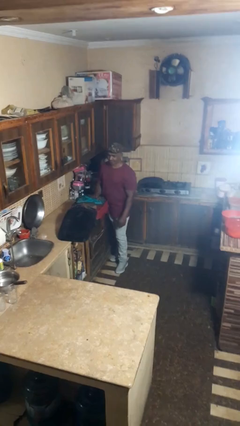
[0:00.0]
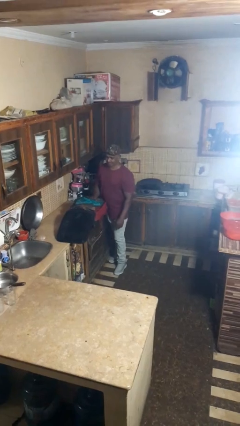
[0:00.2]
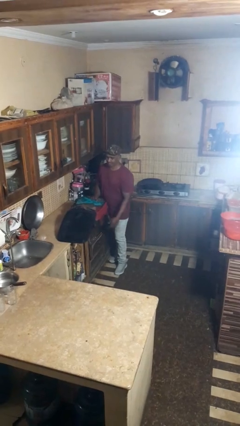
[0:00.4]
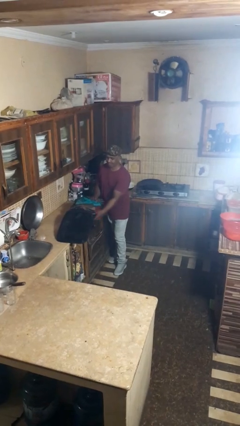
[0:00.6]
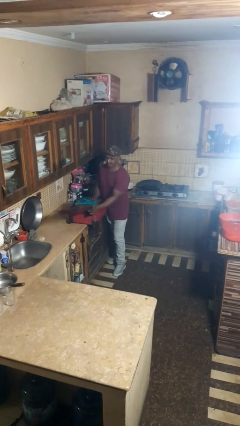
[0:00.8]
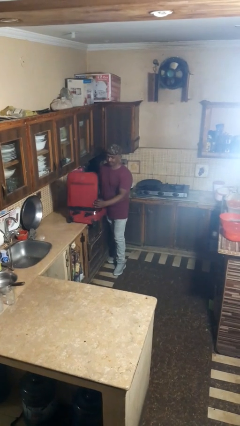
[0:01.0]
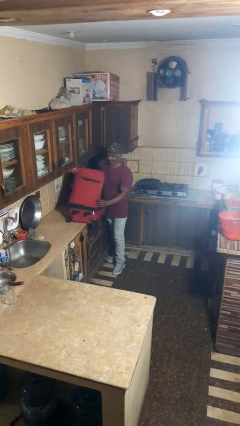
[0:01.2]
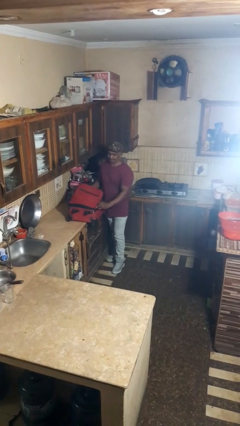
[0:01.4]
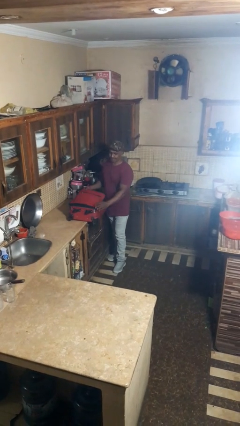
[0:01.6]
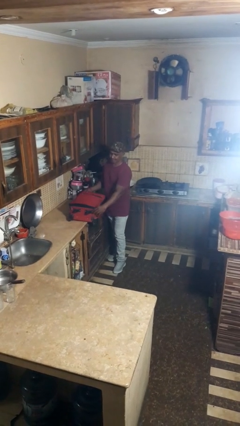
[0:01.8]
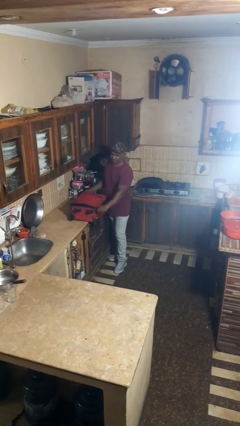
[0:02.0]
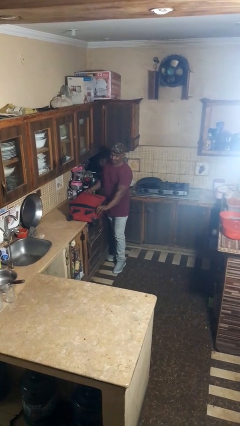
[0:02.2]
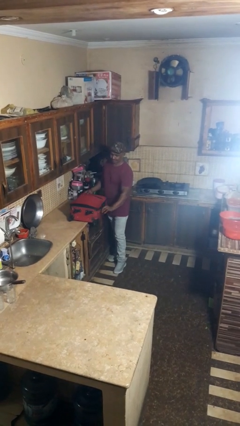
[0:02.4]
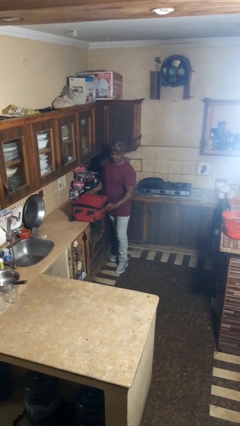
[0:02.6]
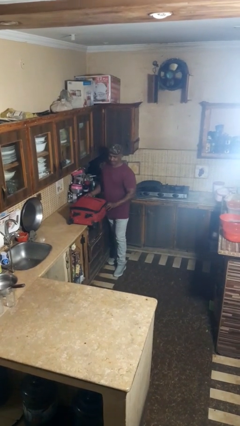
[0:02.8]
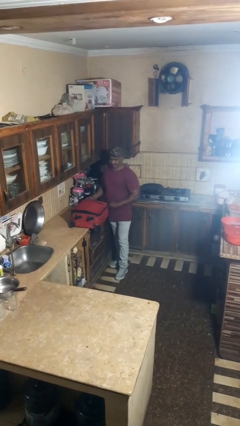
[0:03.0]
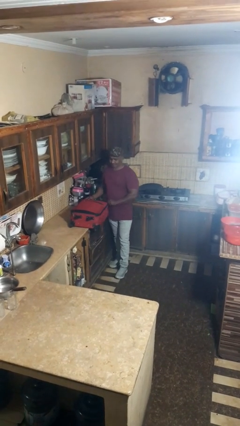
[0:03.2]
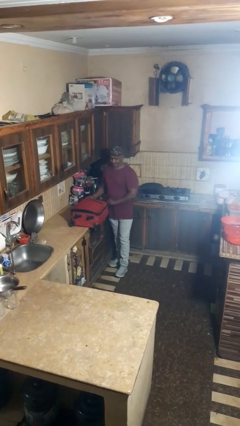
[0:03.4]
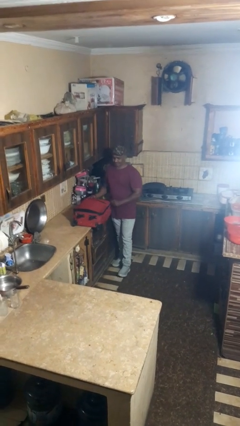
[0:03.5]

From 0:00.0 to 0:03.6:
person closes suitcase

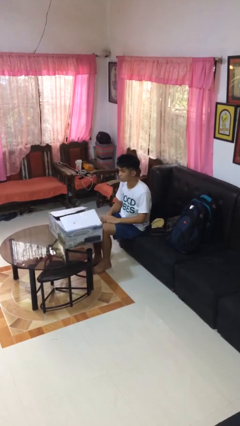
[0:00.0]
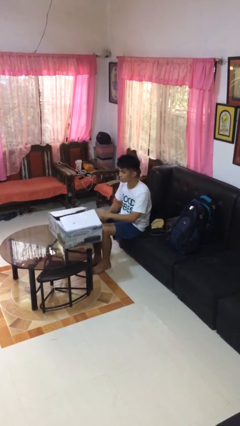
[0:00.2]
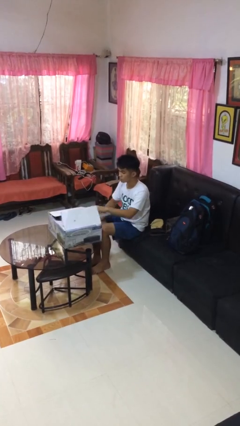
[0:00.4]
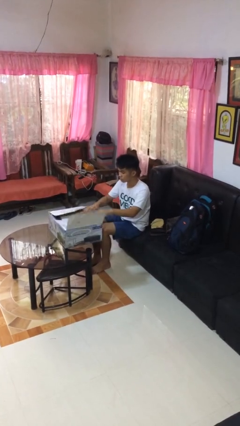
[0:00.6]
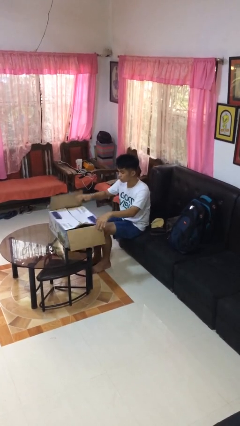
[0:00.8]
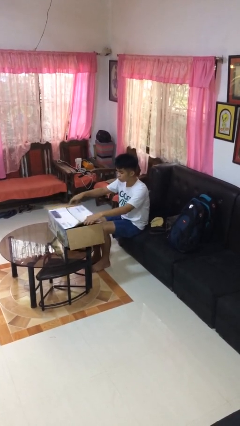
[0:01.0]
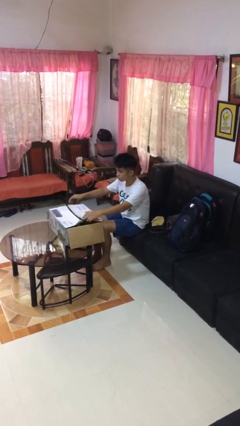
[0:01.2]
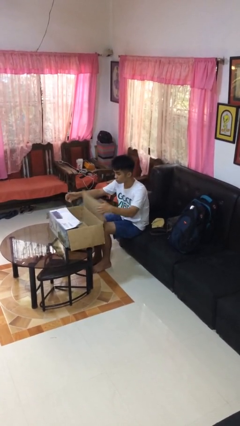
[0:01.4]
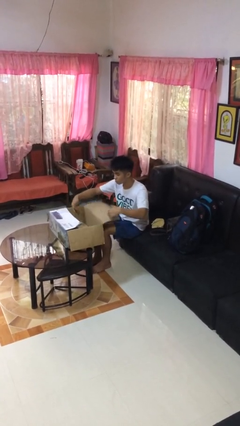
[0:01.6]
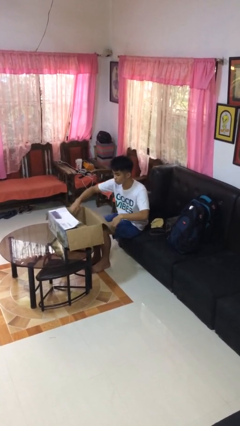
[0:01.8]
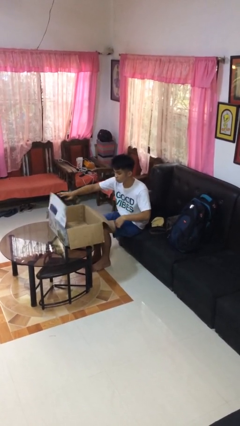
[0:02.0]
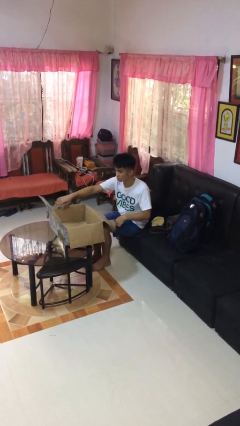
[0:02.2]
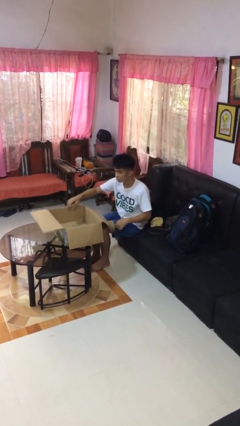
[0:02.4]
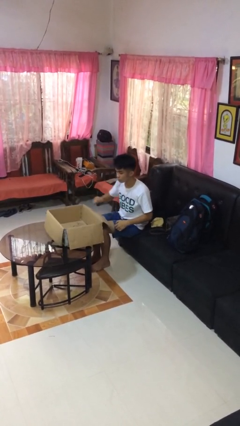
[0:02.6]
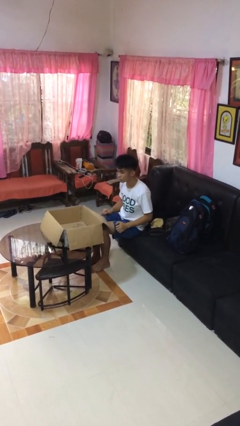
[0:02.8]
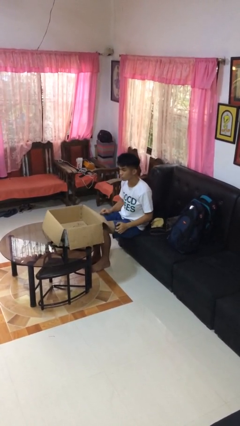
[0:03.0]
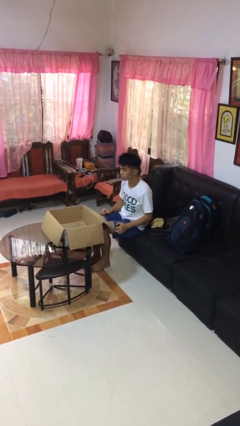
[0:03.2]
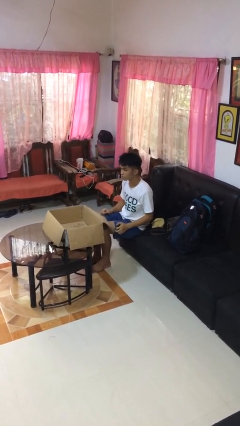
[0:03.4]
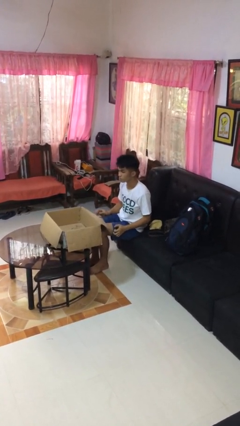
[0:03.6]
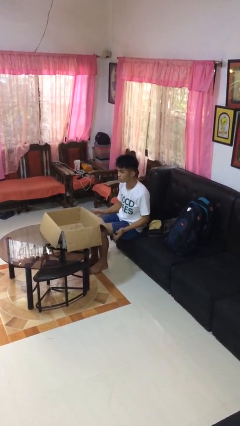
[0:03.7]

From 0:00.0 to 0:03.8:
person opens box

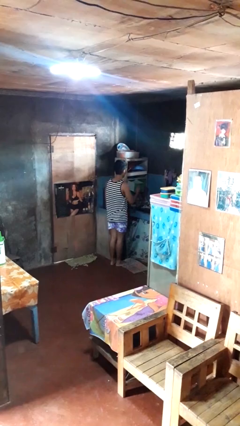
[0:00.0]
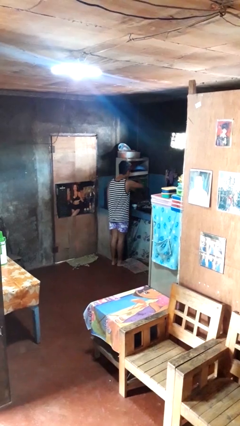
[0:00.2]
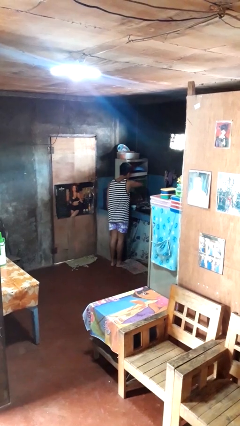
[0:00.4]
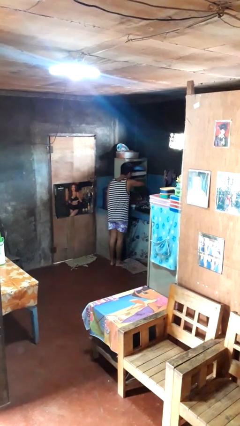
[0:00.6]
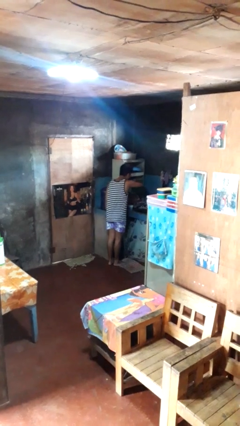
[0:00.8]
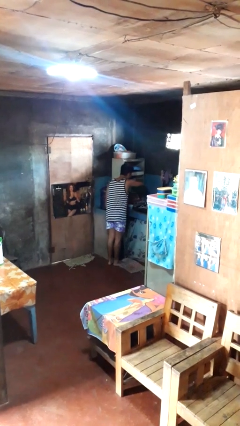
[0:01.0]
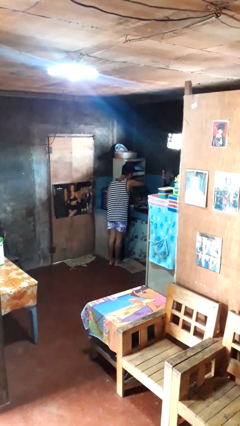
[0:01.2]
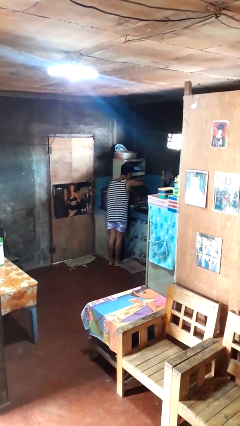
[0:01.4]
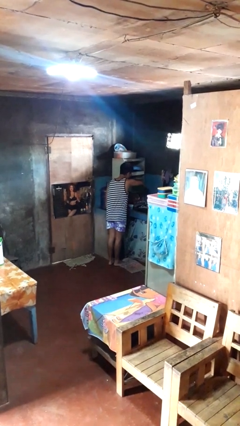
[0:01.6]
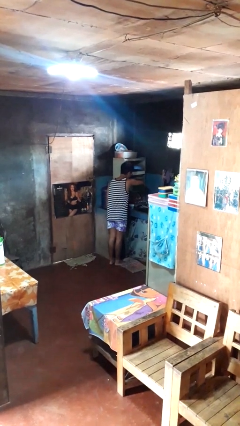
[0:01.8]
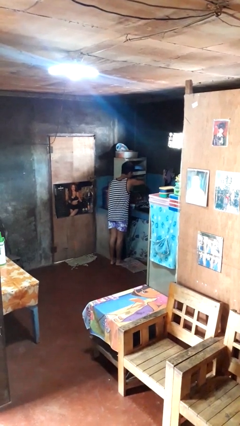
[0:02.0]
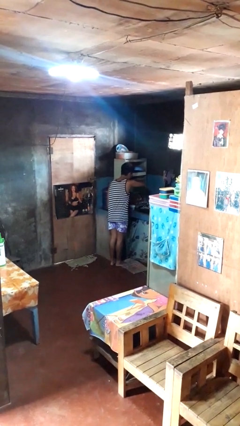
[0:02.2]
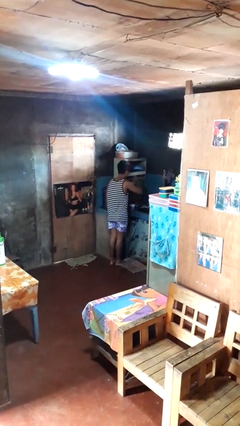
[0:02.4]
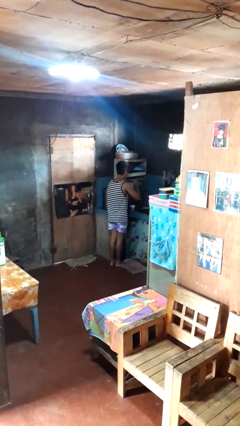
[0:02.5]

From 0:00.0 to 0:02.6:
person searches in kitchen drawer

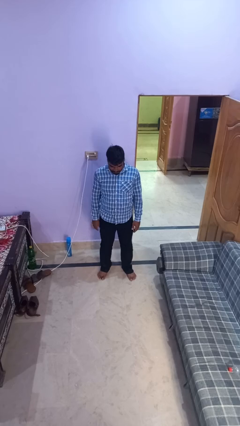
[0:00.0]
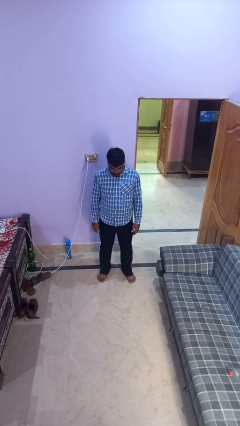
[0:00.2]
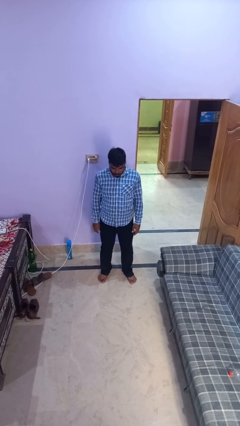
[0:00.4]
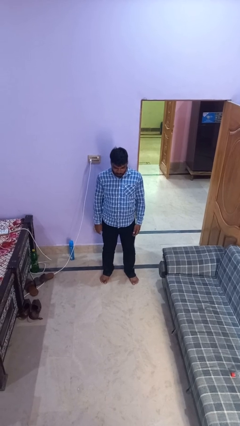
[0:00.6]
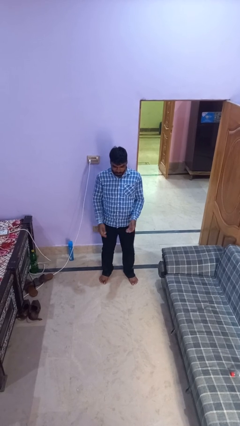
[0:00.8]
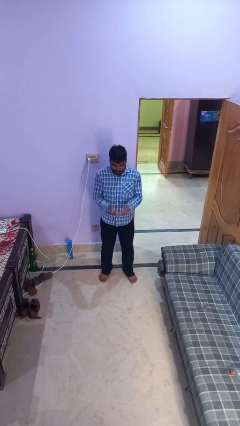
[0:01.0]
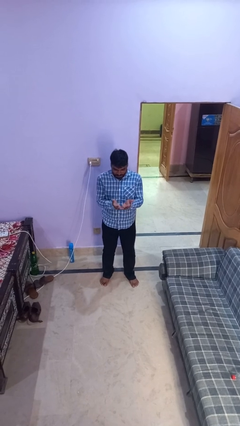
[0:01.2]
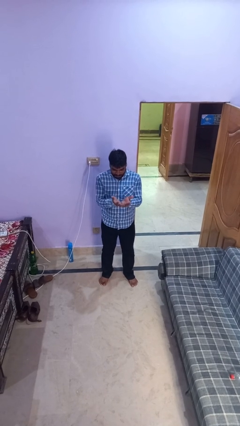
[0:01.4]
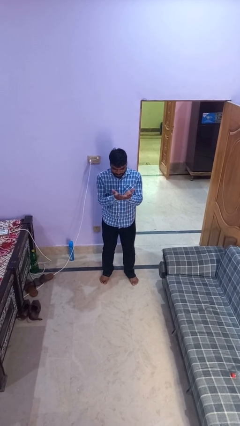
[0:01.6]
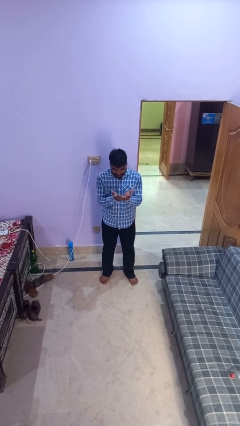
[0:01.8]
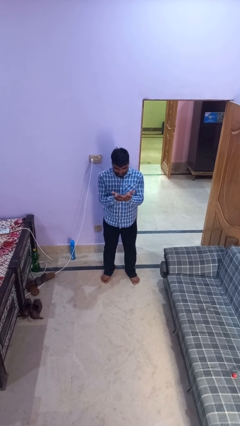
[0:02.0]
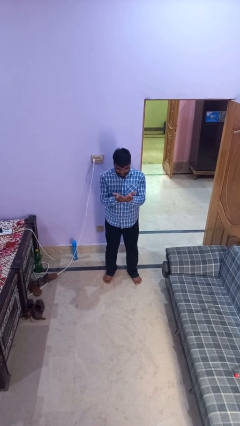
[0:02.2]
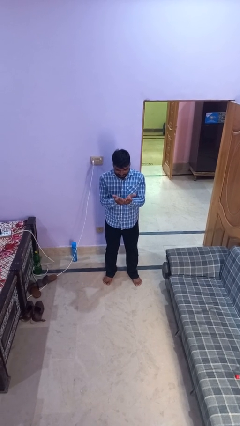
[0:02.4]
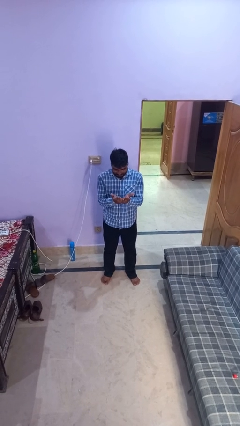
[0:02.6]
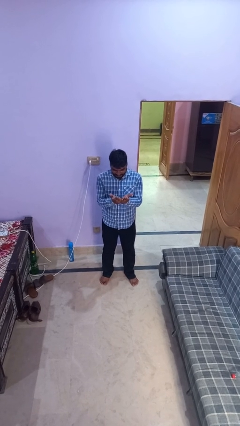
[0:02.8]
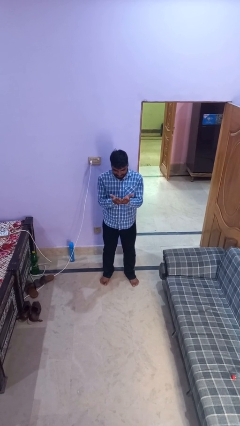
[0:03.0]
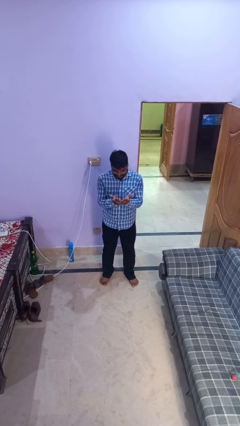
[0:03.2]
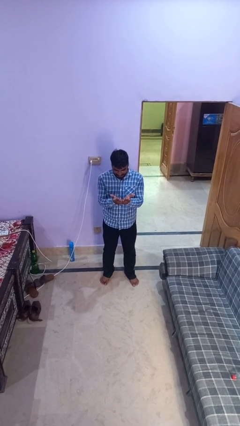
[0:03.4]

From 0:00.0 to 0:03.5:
person prays

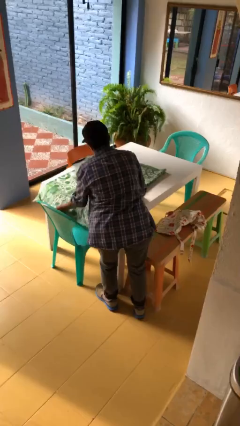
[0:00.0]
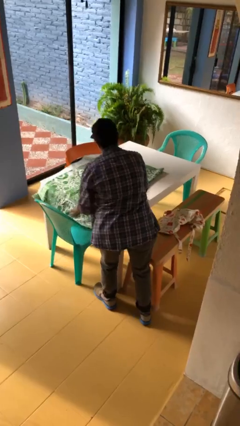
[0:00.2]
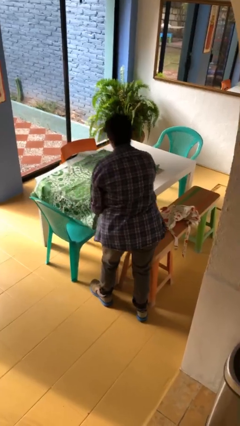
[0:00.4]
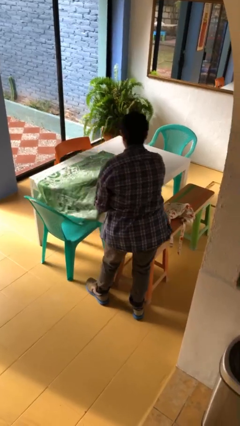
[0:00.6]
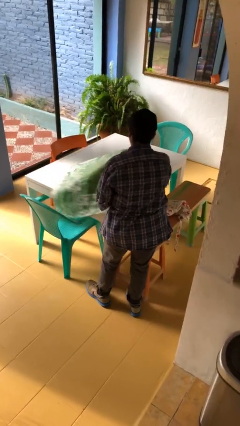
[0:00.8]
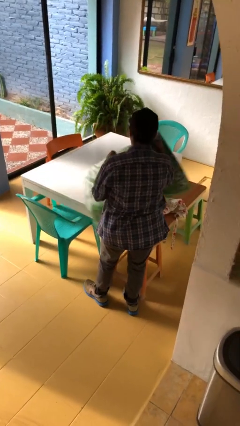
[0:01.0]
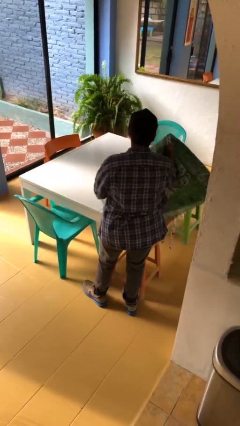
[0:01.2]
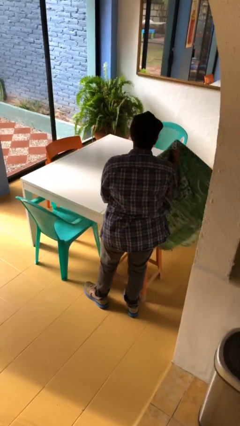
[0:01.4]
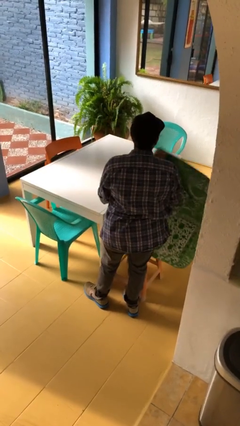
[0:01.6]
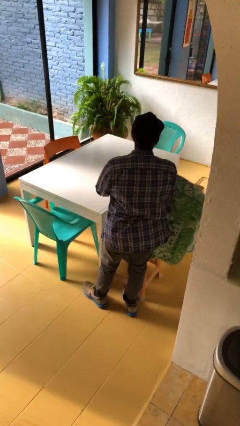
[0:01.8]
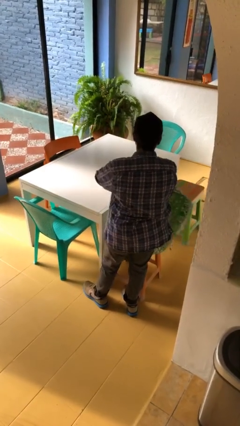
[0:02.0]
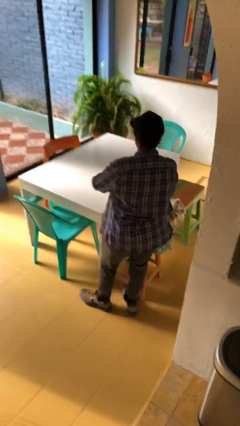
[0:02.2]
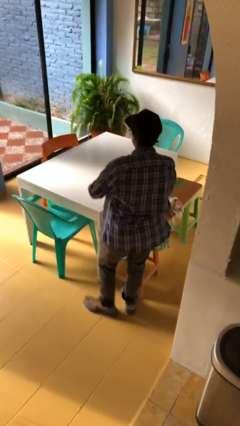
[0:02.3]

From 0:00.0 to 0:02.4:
person folds tablecloth

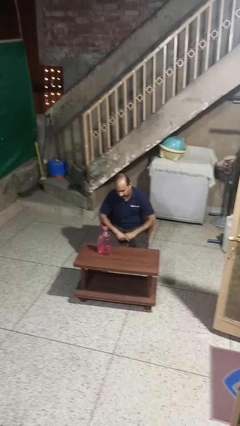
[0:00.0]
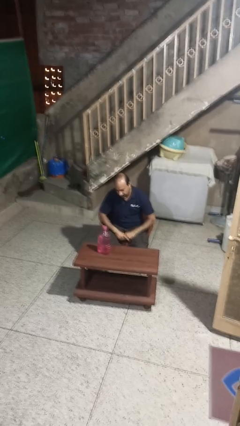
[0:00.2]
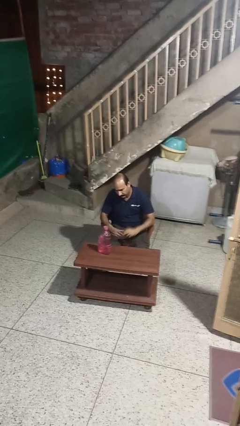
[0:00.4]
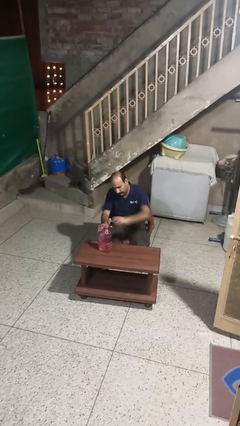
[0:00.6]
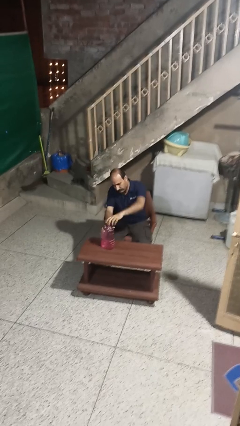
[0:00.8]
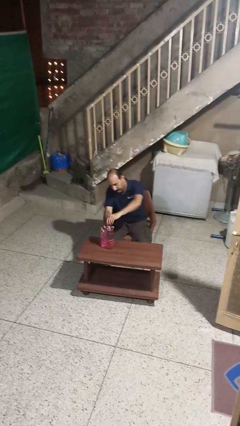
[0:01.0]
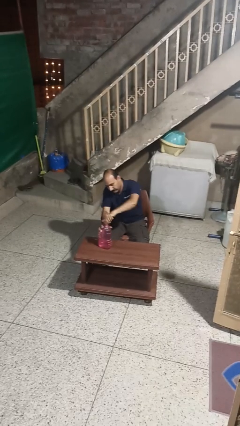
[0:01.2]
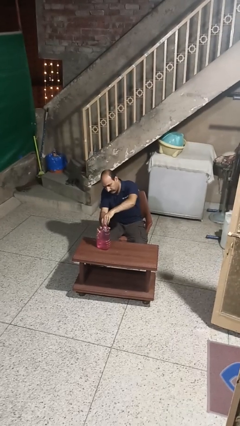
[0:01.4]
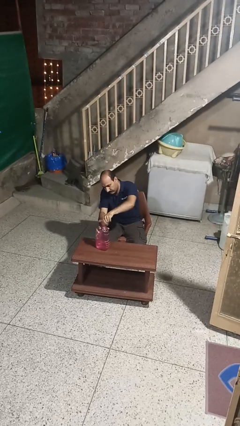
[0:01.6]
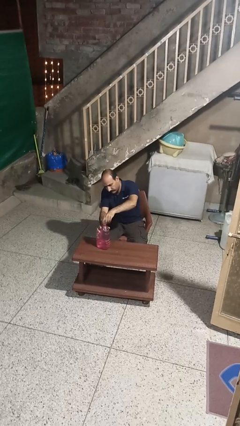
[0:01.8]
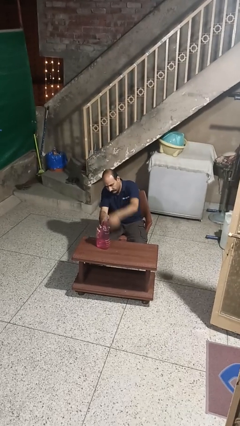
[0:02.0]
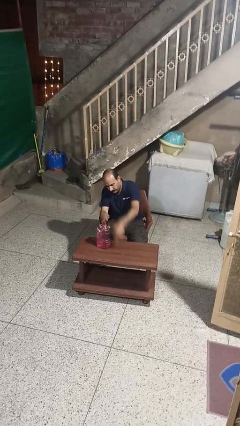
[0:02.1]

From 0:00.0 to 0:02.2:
person unscrews lid from bottle
